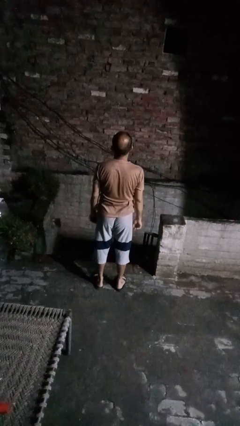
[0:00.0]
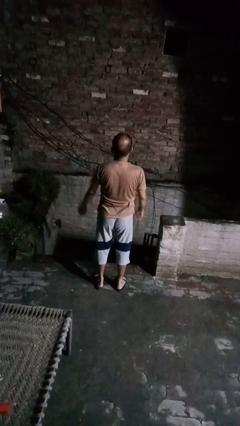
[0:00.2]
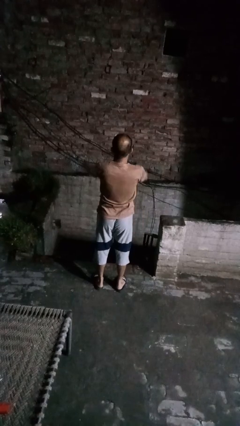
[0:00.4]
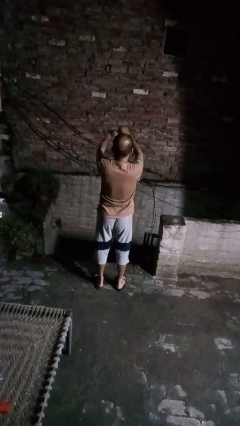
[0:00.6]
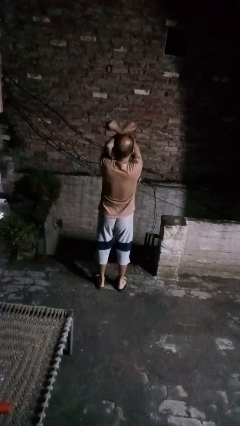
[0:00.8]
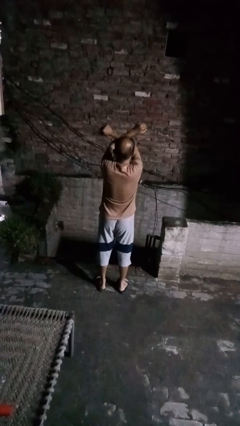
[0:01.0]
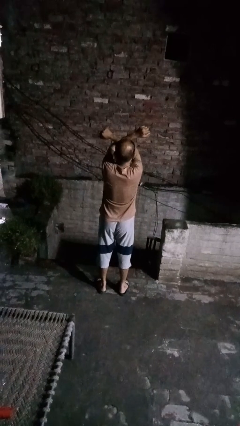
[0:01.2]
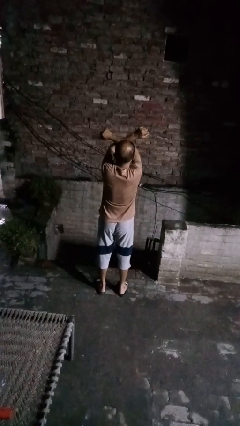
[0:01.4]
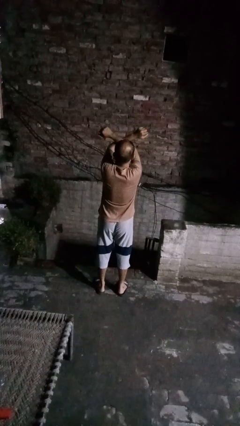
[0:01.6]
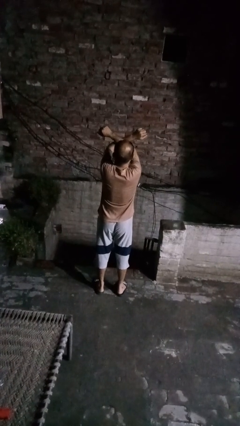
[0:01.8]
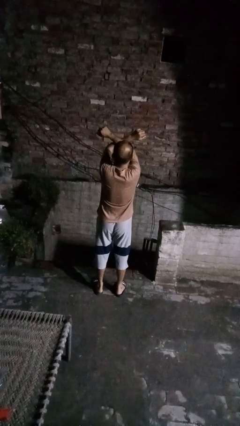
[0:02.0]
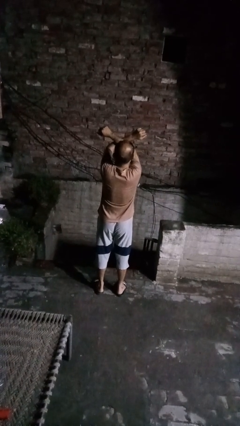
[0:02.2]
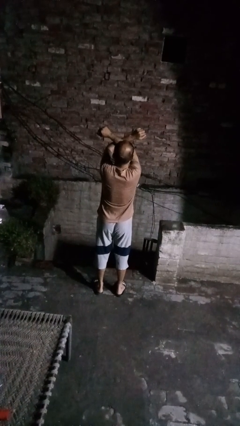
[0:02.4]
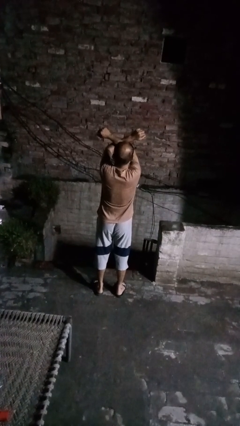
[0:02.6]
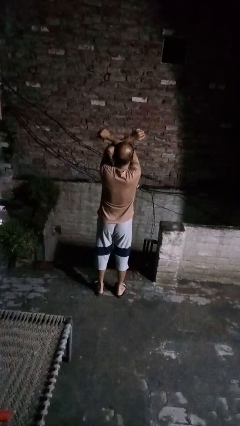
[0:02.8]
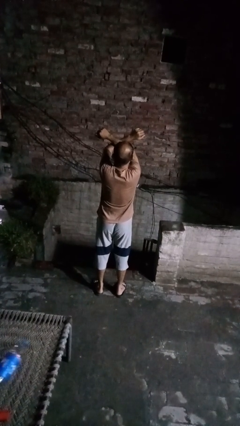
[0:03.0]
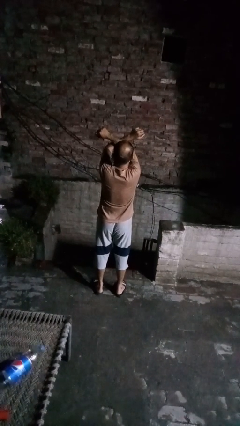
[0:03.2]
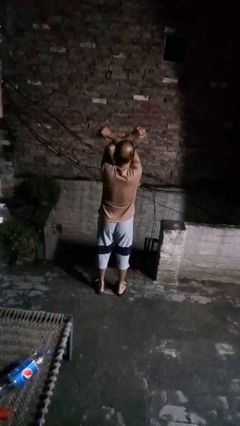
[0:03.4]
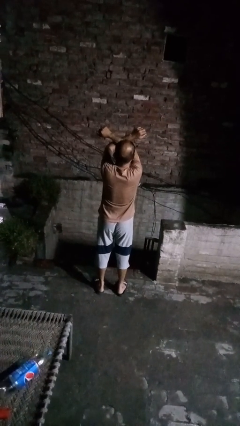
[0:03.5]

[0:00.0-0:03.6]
person gestures arms x

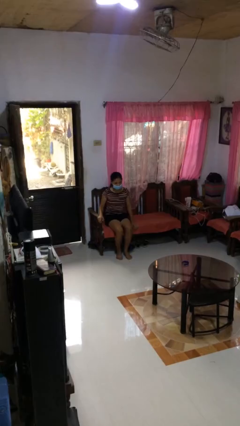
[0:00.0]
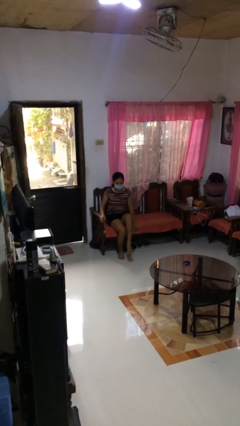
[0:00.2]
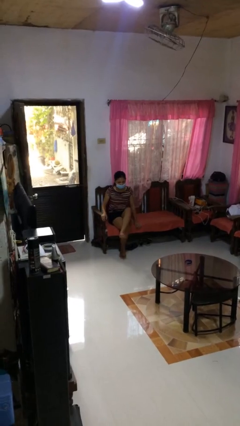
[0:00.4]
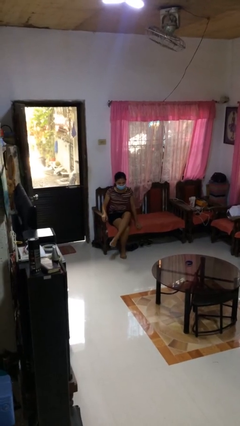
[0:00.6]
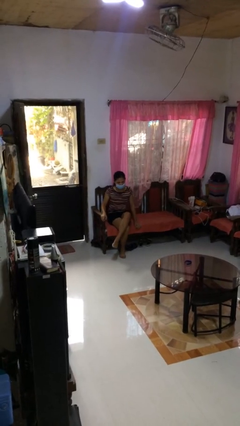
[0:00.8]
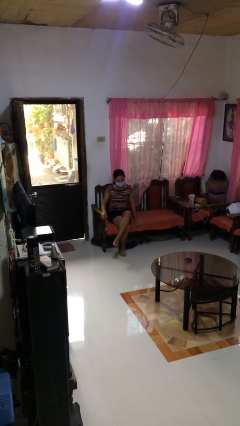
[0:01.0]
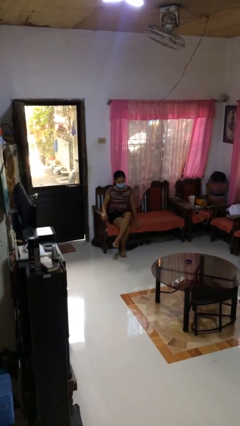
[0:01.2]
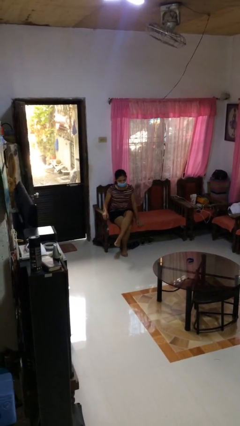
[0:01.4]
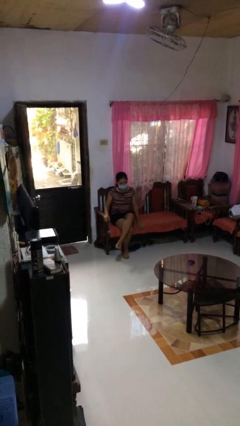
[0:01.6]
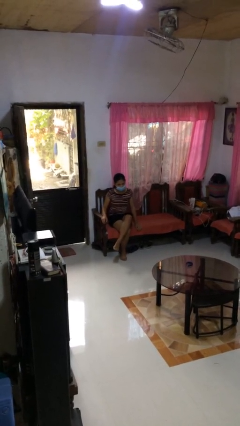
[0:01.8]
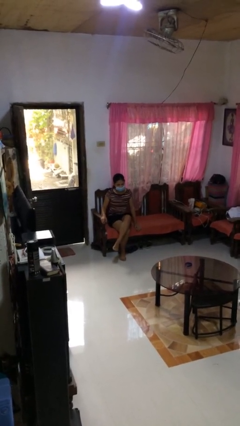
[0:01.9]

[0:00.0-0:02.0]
person crosses legs

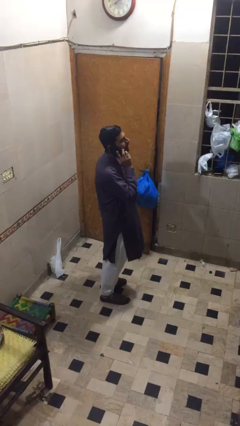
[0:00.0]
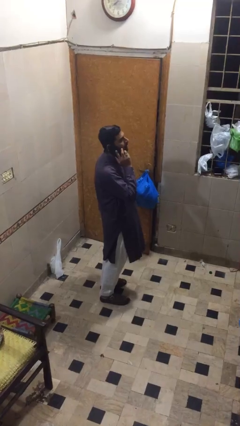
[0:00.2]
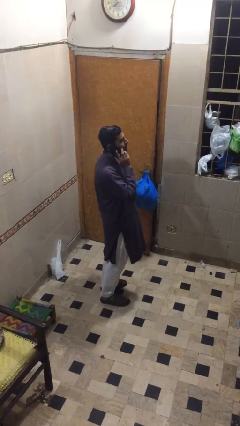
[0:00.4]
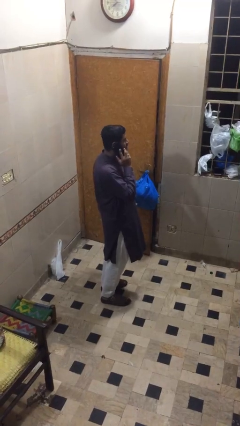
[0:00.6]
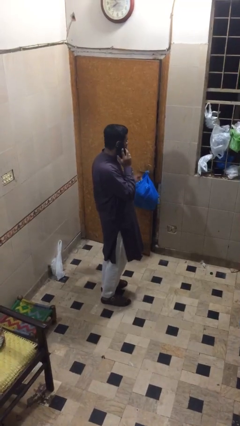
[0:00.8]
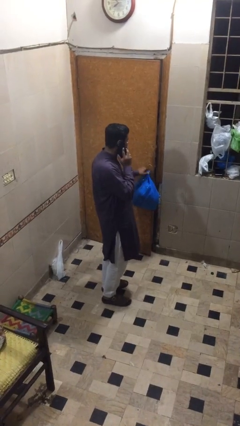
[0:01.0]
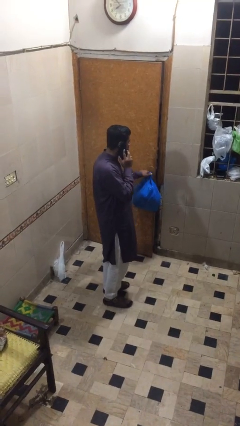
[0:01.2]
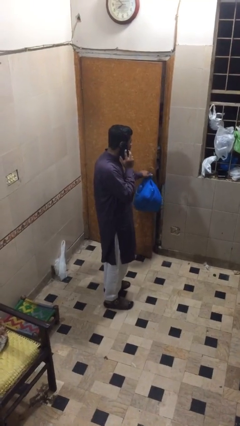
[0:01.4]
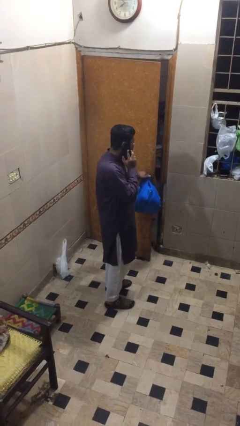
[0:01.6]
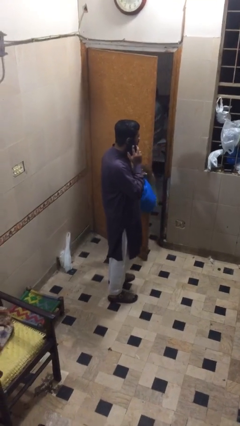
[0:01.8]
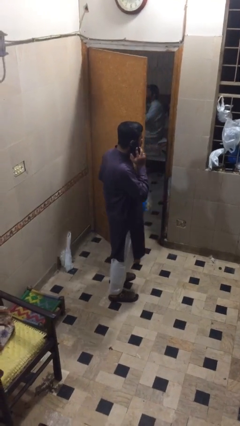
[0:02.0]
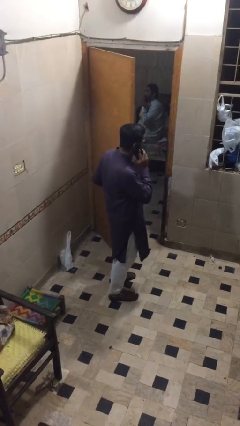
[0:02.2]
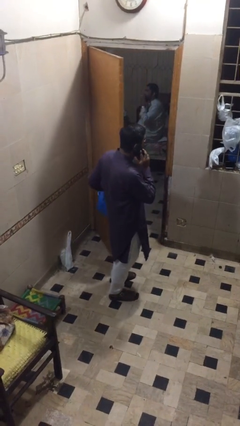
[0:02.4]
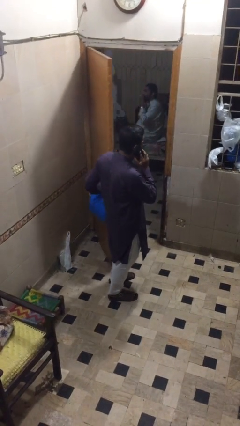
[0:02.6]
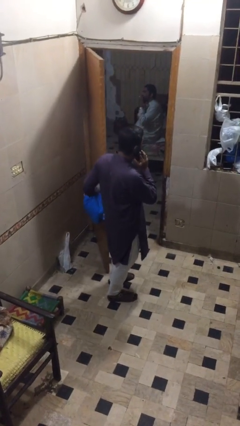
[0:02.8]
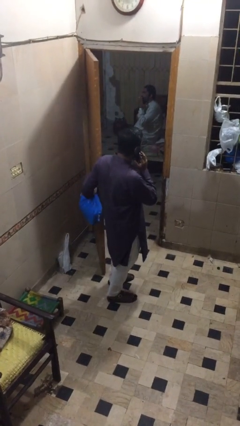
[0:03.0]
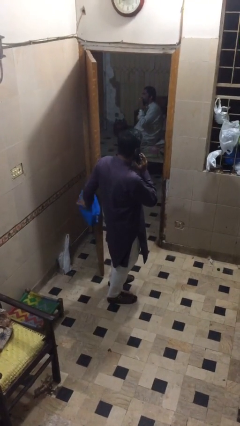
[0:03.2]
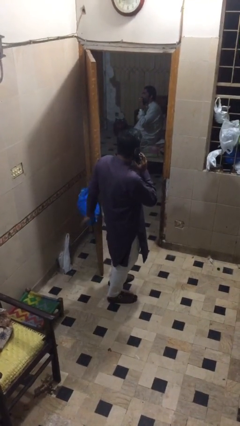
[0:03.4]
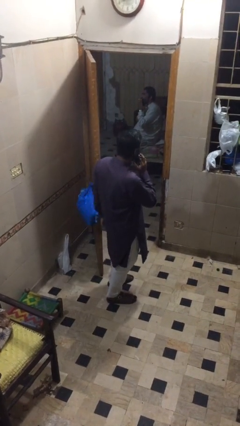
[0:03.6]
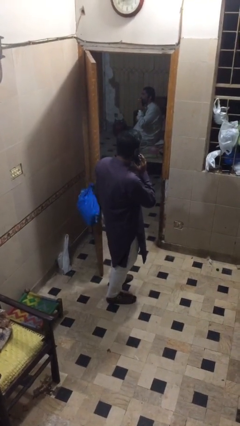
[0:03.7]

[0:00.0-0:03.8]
person opens facility door

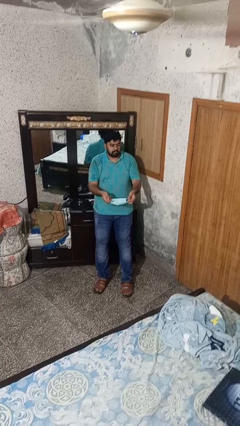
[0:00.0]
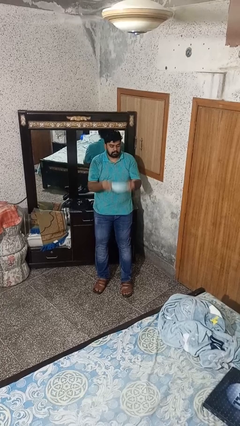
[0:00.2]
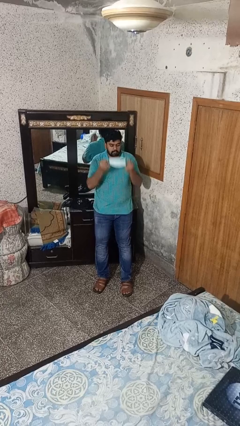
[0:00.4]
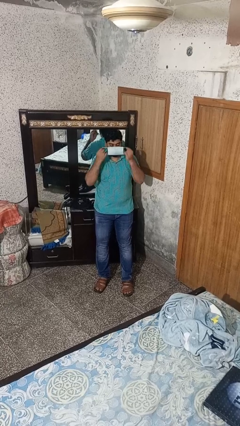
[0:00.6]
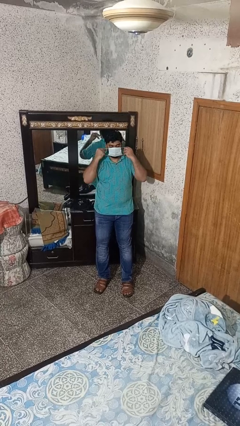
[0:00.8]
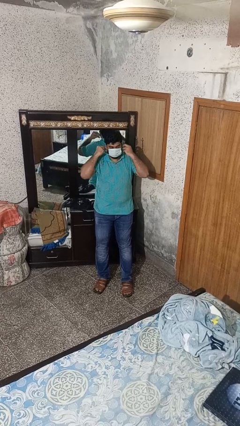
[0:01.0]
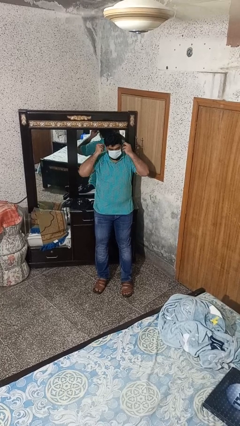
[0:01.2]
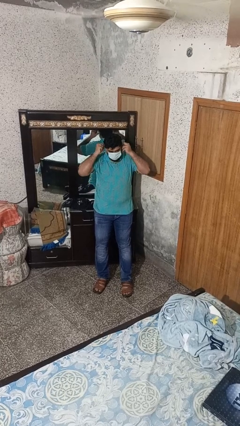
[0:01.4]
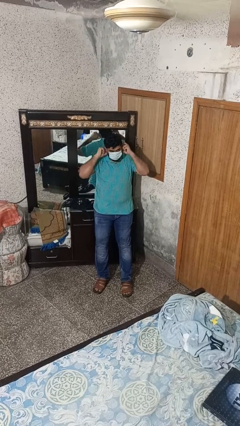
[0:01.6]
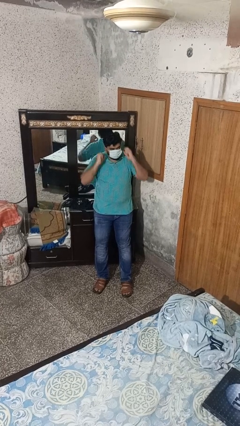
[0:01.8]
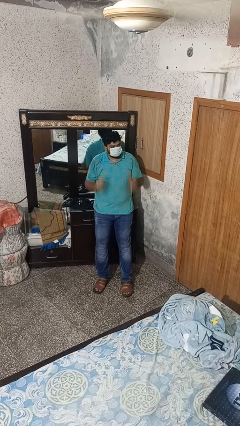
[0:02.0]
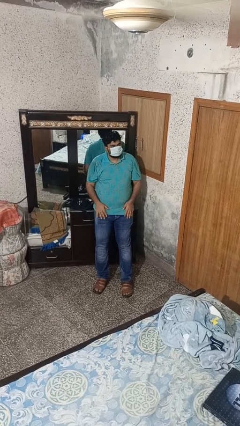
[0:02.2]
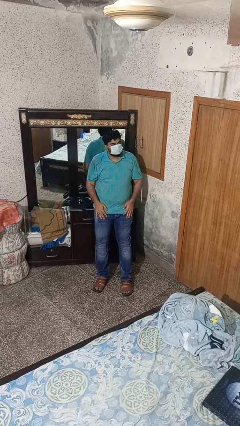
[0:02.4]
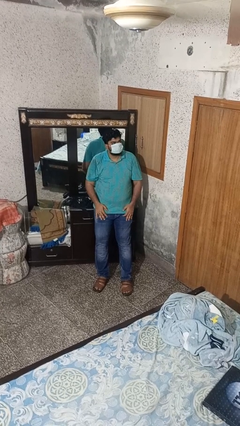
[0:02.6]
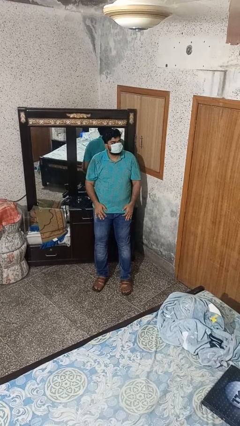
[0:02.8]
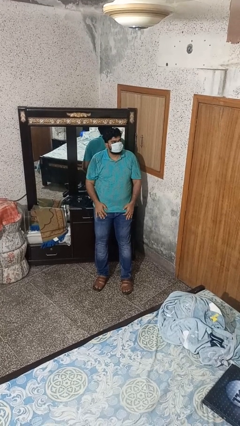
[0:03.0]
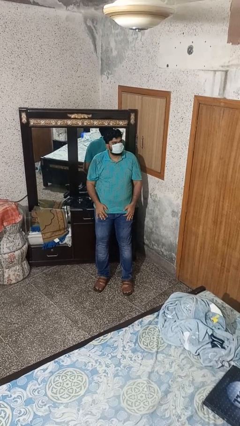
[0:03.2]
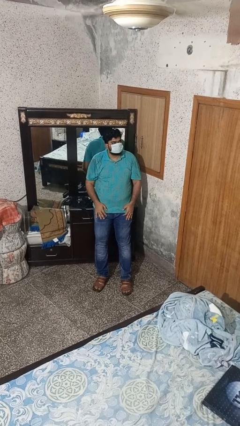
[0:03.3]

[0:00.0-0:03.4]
person puts on facemask

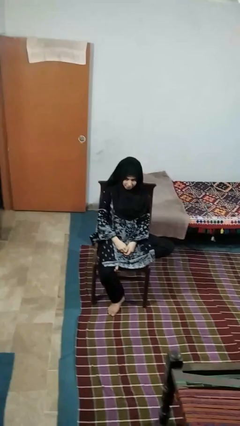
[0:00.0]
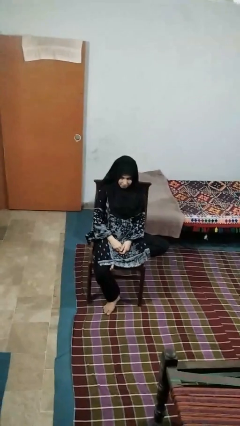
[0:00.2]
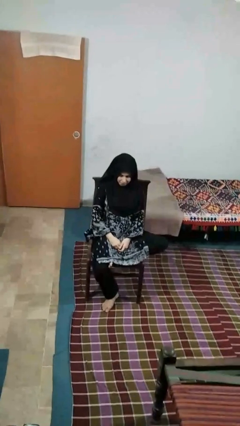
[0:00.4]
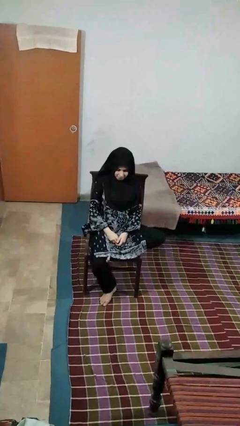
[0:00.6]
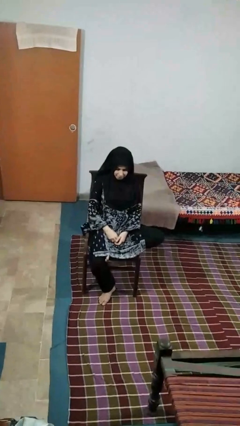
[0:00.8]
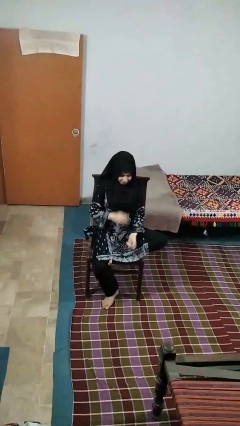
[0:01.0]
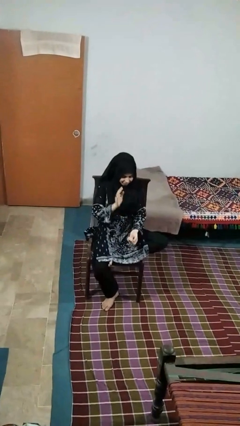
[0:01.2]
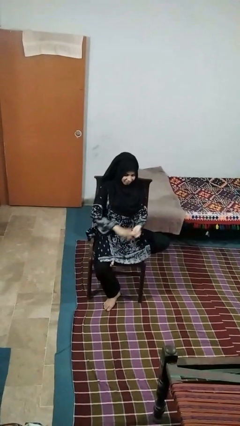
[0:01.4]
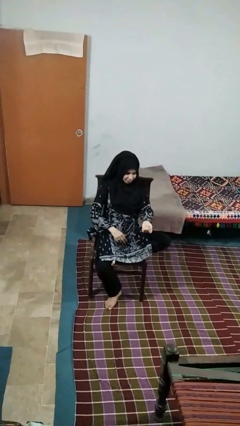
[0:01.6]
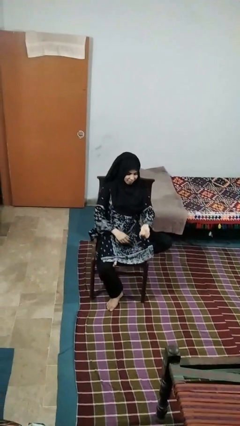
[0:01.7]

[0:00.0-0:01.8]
person swats bug

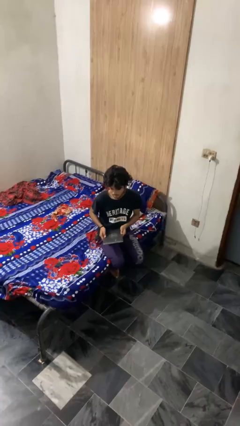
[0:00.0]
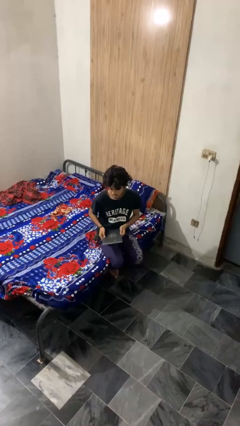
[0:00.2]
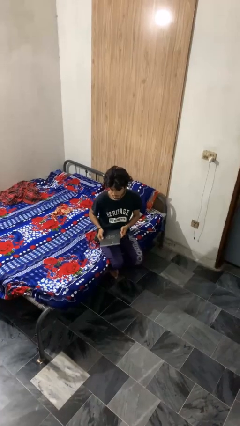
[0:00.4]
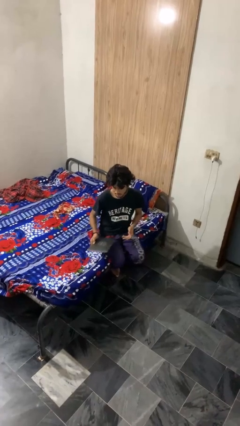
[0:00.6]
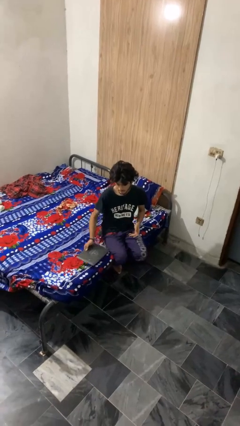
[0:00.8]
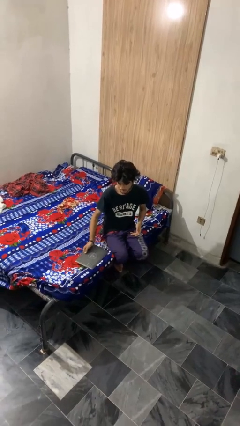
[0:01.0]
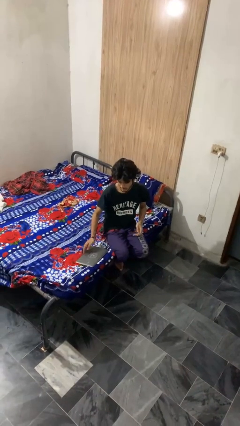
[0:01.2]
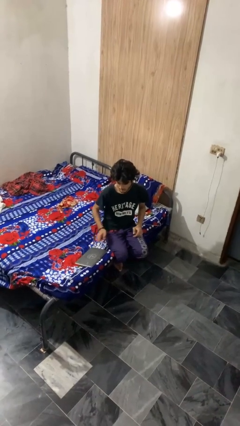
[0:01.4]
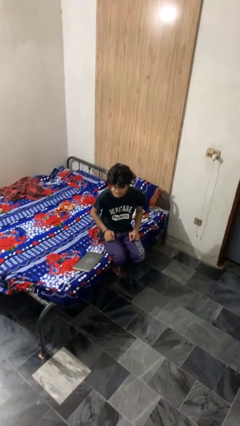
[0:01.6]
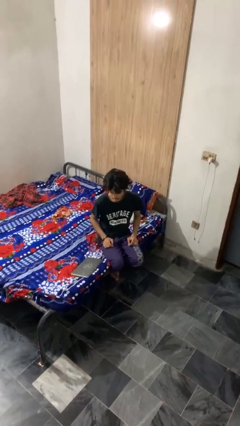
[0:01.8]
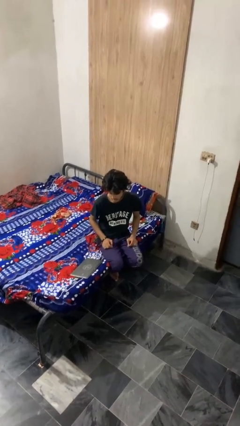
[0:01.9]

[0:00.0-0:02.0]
person puts down object on bed

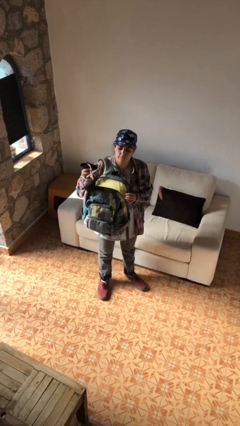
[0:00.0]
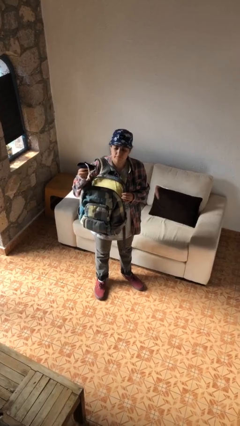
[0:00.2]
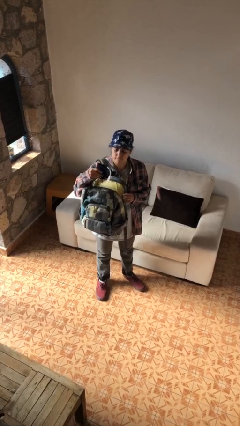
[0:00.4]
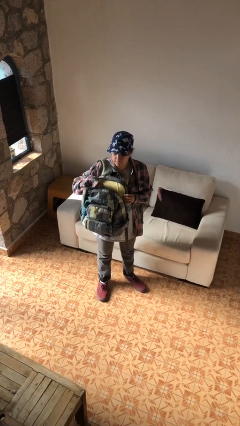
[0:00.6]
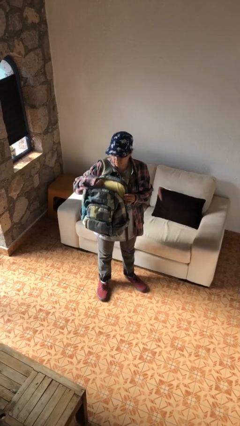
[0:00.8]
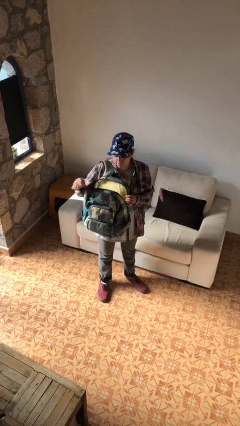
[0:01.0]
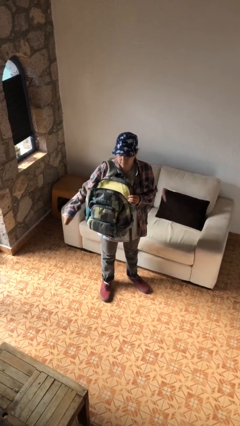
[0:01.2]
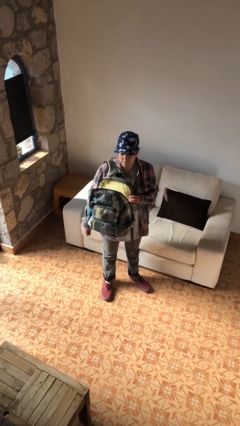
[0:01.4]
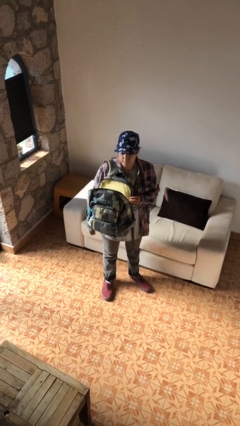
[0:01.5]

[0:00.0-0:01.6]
person puts object into backpack
